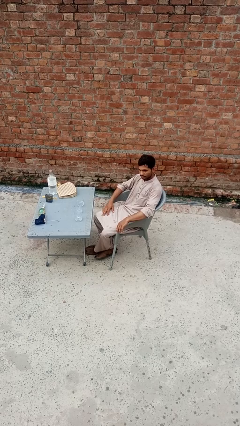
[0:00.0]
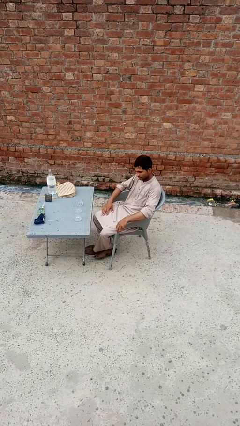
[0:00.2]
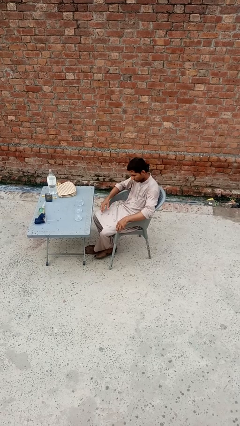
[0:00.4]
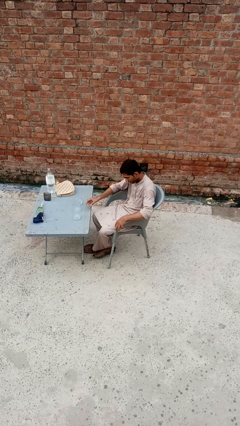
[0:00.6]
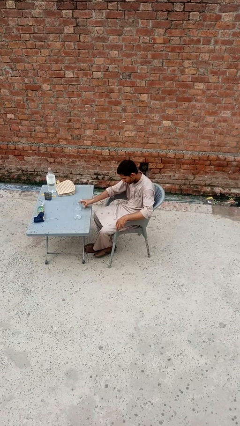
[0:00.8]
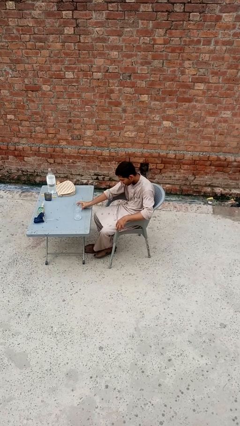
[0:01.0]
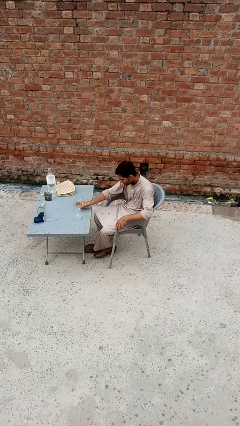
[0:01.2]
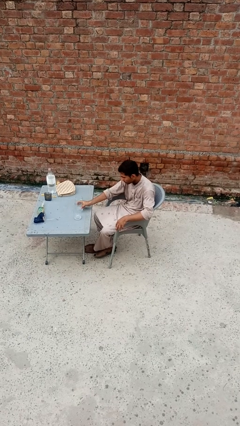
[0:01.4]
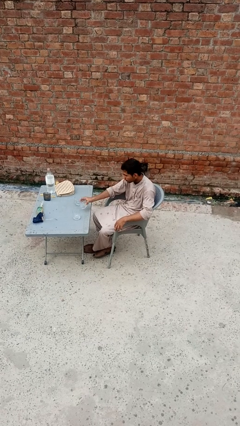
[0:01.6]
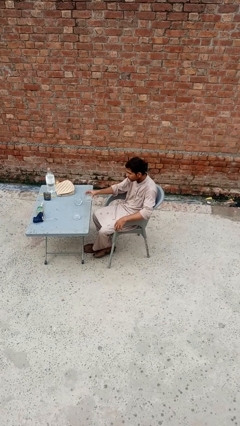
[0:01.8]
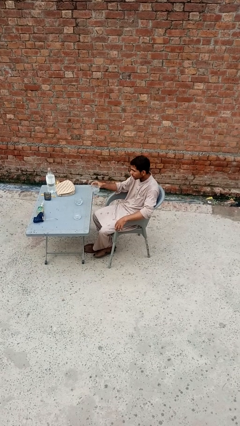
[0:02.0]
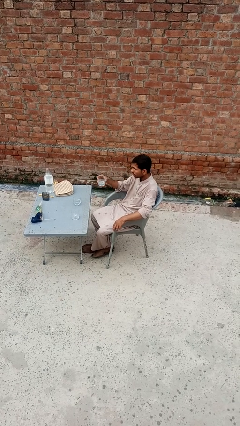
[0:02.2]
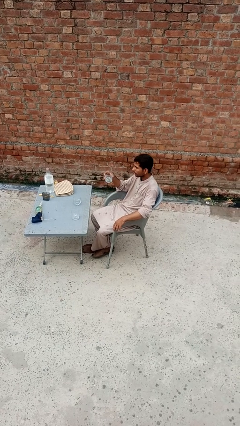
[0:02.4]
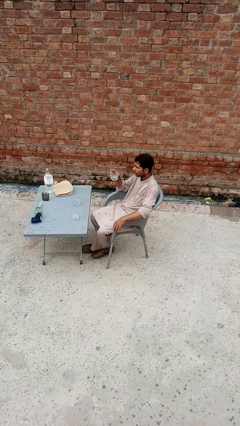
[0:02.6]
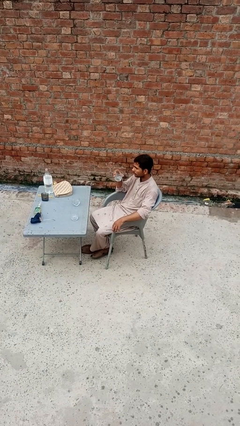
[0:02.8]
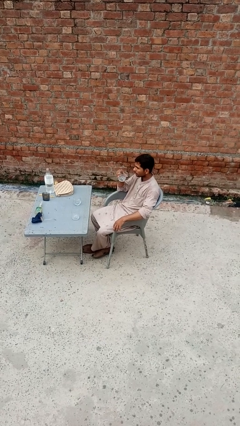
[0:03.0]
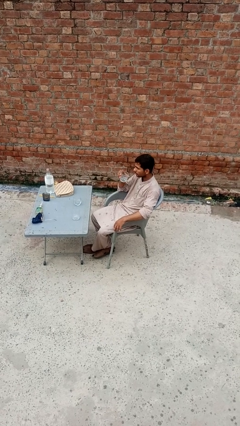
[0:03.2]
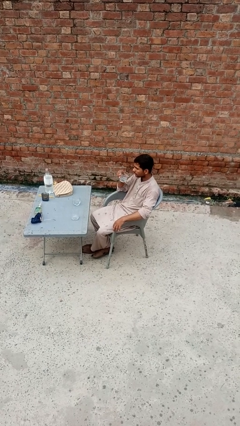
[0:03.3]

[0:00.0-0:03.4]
person picks up object from table

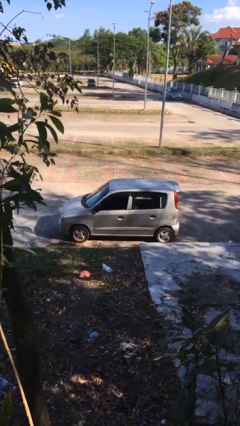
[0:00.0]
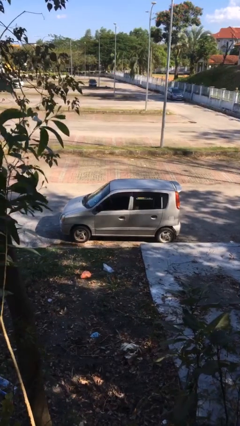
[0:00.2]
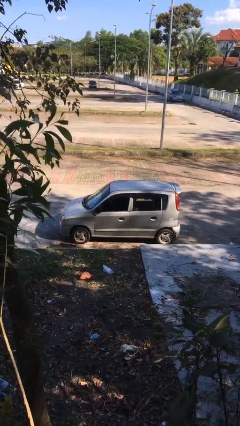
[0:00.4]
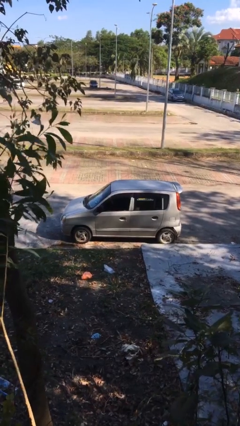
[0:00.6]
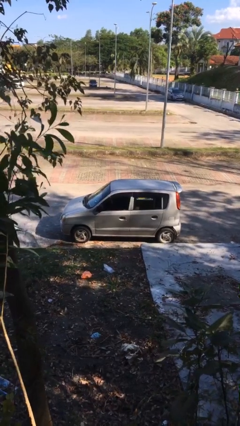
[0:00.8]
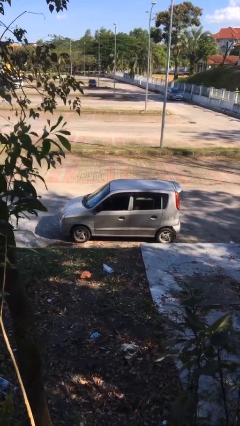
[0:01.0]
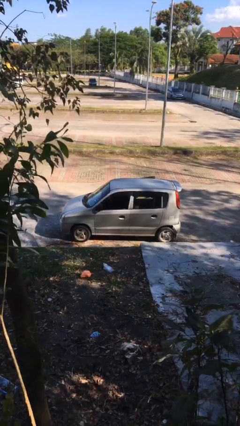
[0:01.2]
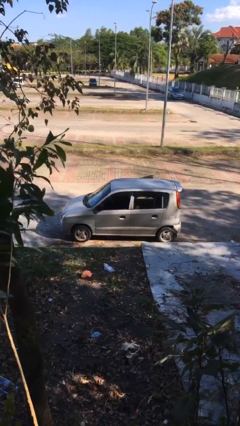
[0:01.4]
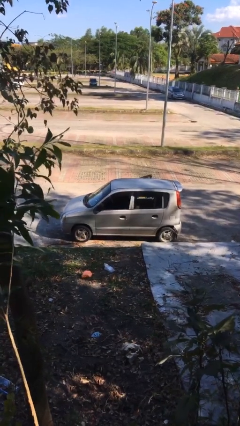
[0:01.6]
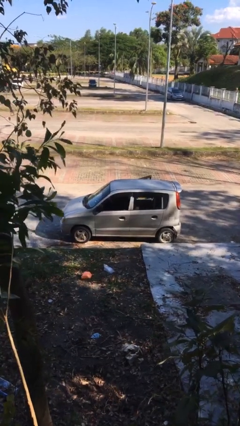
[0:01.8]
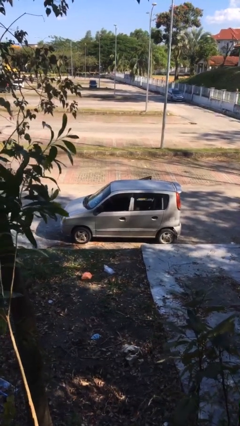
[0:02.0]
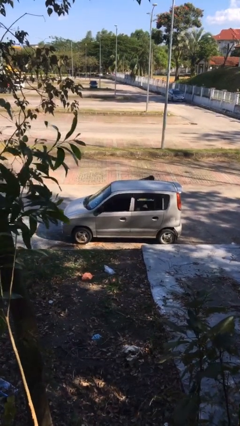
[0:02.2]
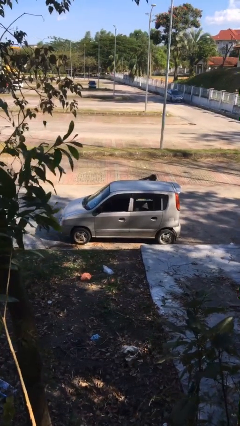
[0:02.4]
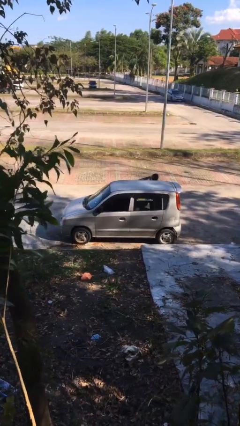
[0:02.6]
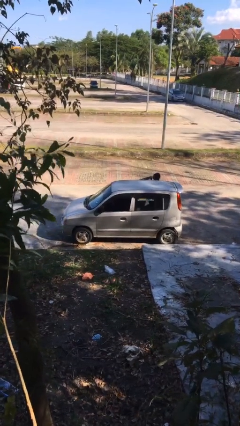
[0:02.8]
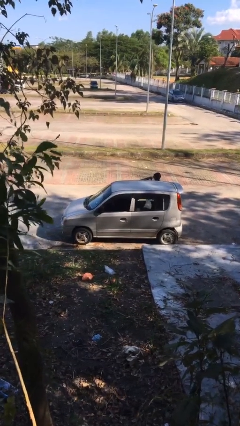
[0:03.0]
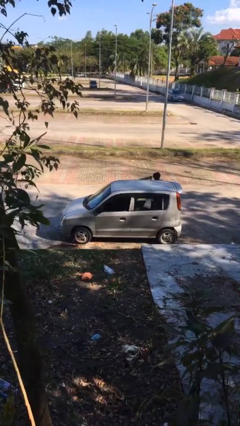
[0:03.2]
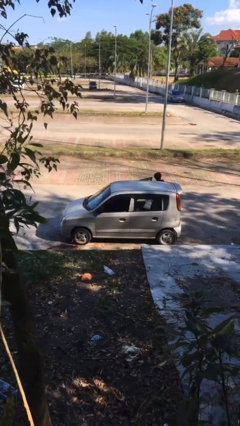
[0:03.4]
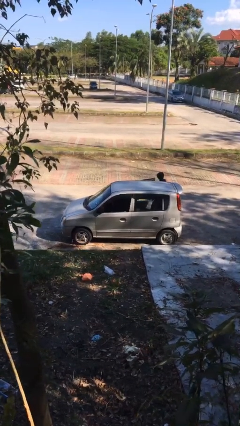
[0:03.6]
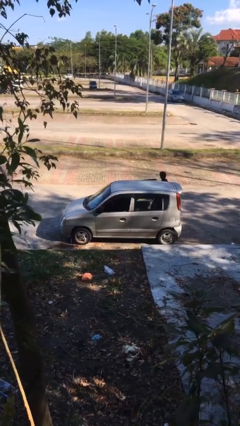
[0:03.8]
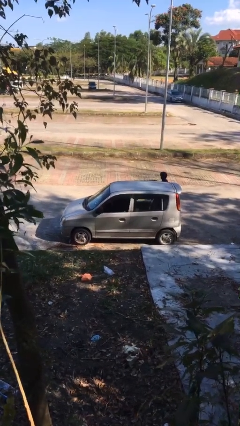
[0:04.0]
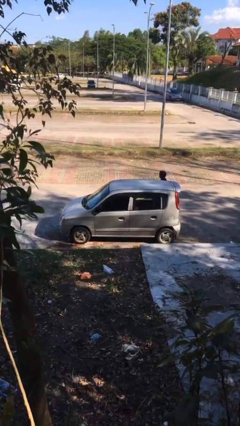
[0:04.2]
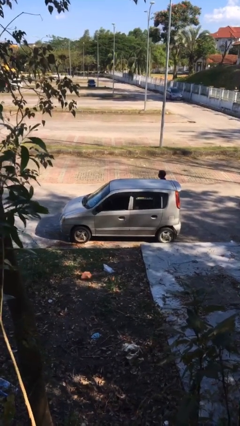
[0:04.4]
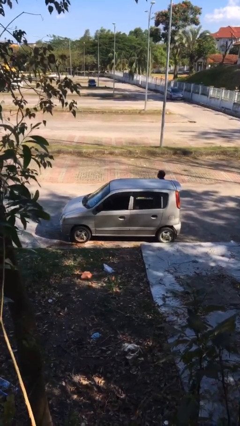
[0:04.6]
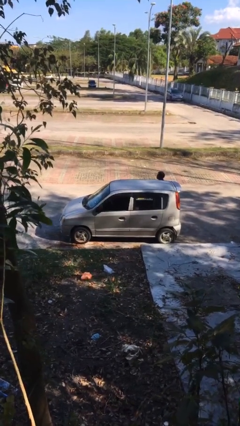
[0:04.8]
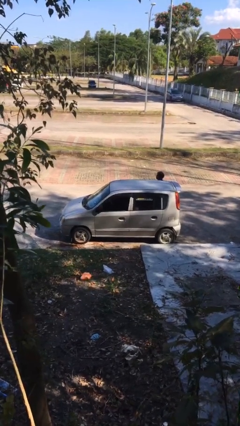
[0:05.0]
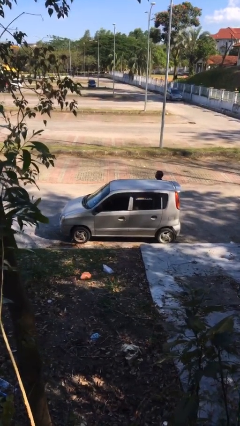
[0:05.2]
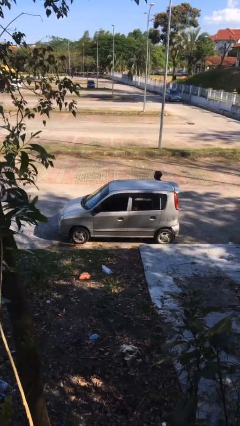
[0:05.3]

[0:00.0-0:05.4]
car drops off person

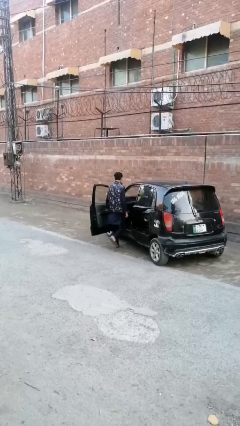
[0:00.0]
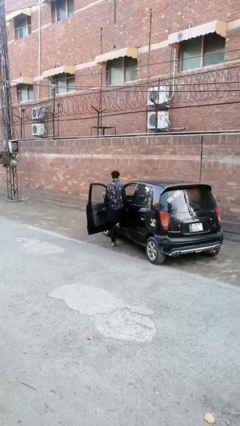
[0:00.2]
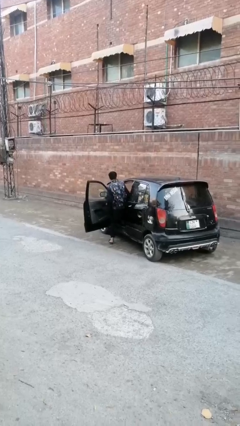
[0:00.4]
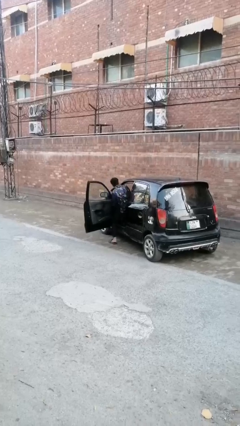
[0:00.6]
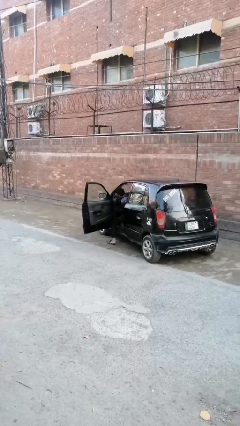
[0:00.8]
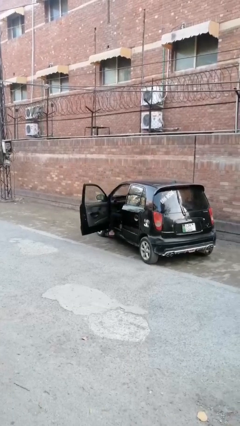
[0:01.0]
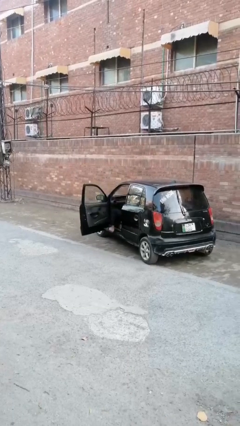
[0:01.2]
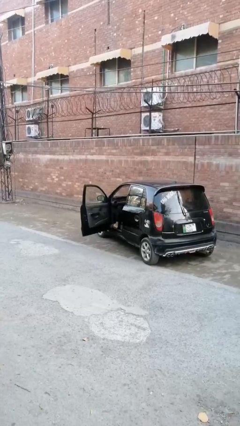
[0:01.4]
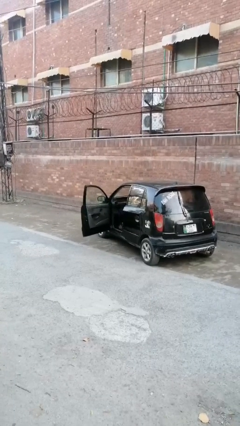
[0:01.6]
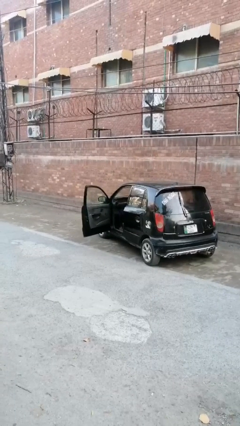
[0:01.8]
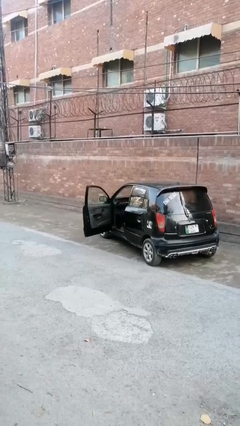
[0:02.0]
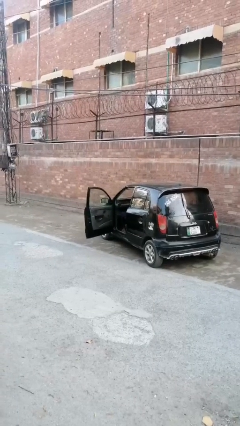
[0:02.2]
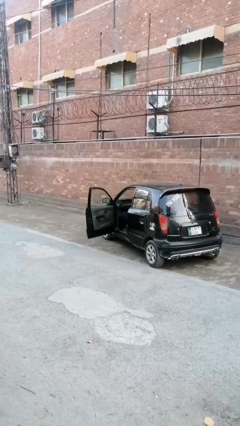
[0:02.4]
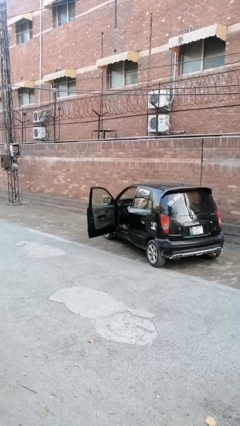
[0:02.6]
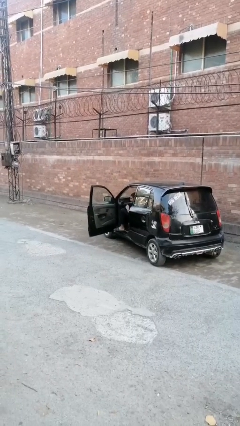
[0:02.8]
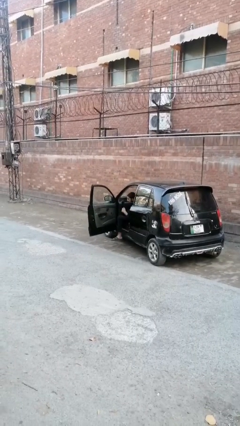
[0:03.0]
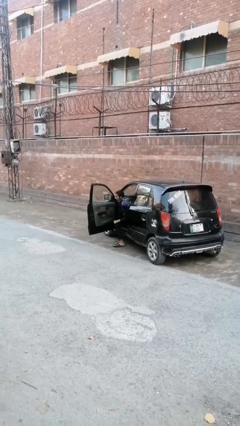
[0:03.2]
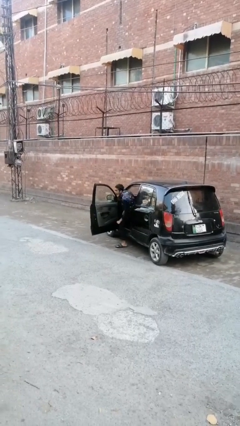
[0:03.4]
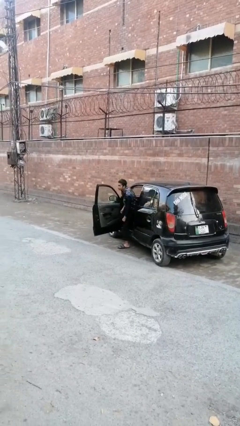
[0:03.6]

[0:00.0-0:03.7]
person enters car

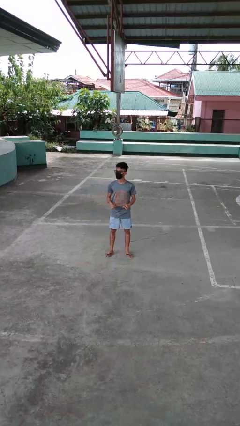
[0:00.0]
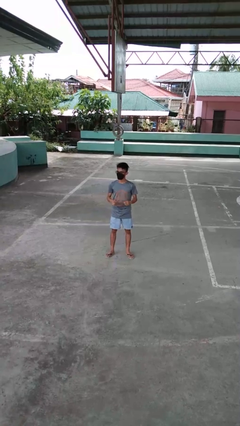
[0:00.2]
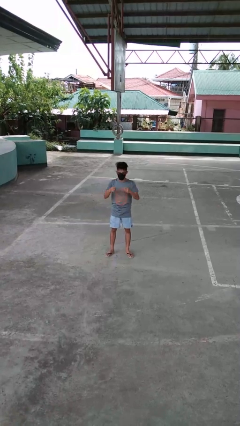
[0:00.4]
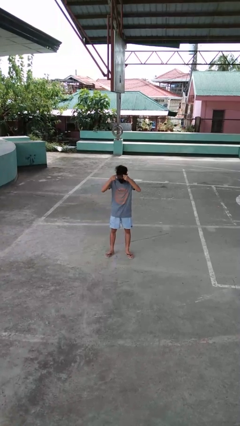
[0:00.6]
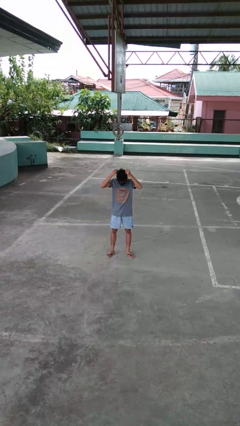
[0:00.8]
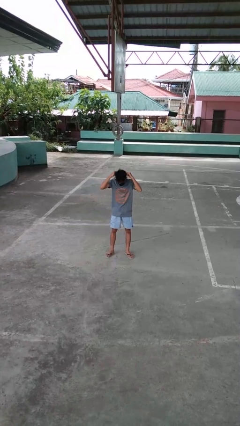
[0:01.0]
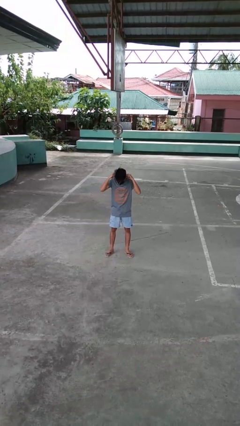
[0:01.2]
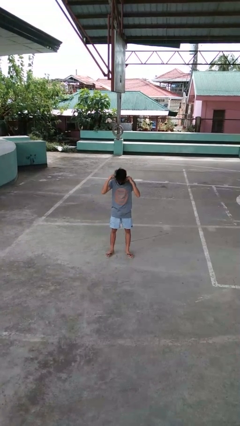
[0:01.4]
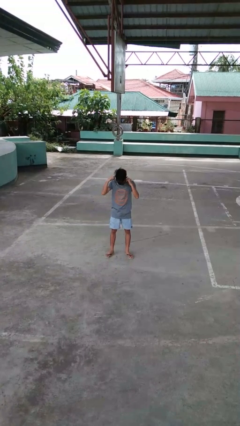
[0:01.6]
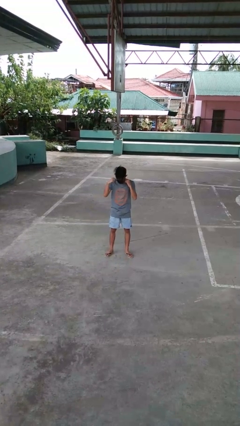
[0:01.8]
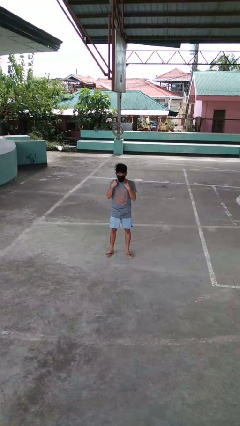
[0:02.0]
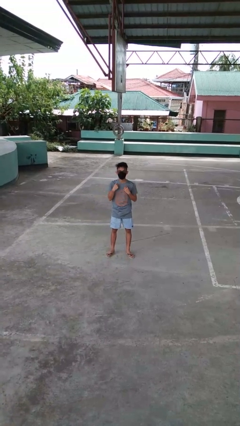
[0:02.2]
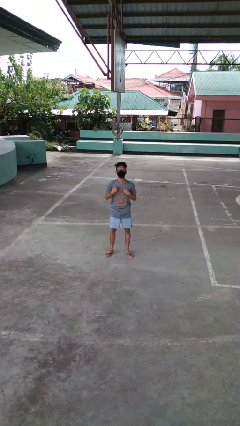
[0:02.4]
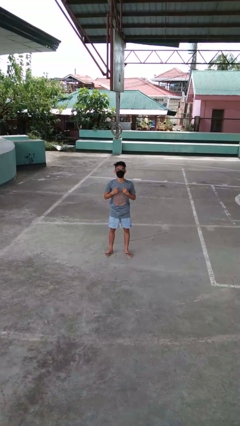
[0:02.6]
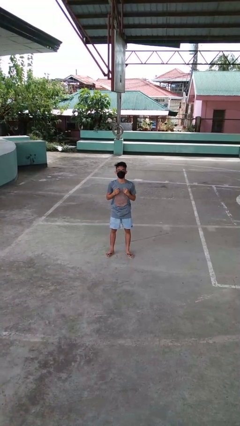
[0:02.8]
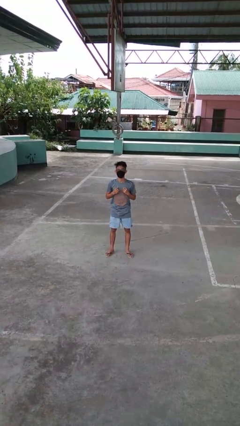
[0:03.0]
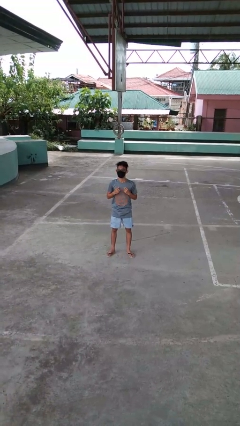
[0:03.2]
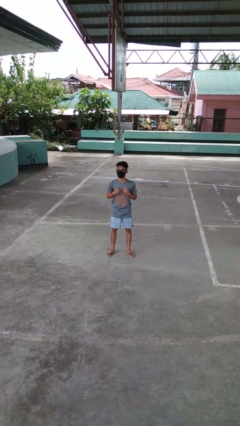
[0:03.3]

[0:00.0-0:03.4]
person puts on necklace

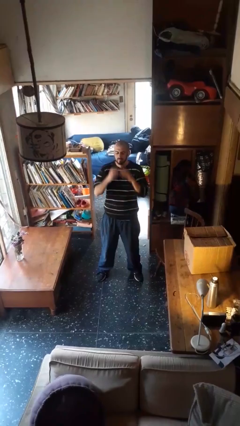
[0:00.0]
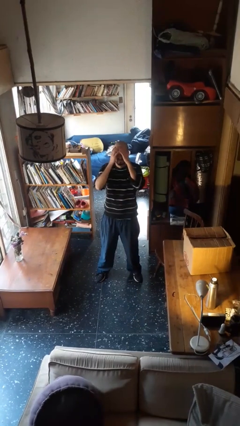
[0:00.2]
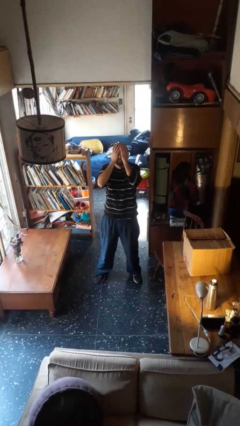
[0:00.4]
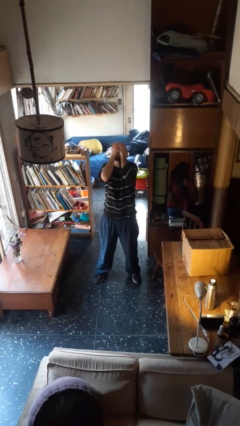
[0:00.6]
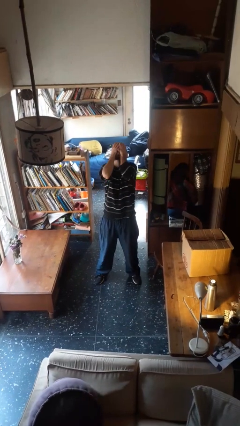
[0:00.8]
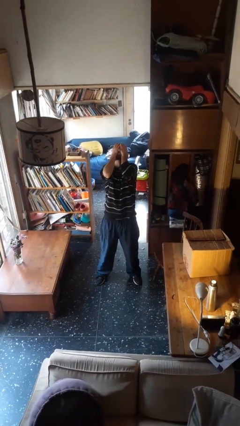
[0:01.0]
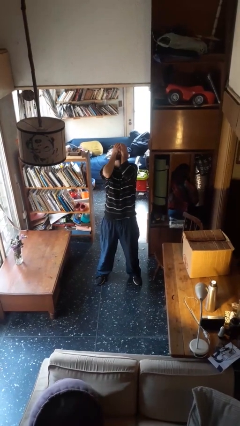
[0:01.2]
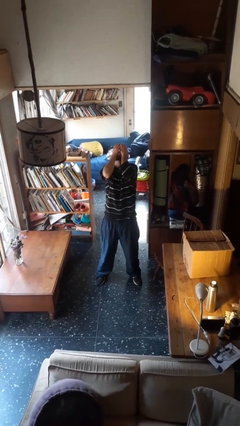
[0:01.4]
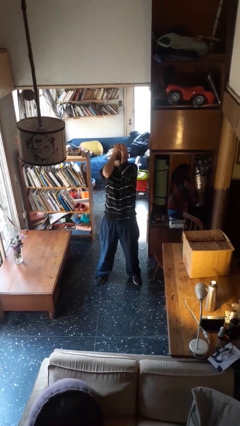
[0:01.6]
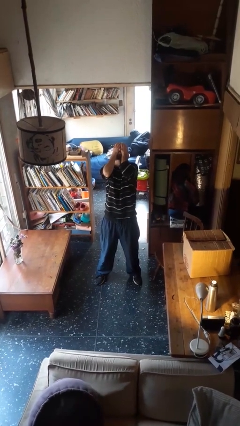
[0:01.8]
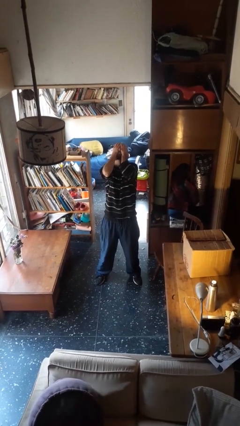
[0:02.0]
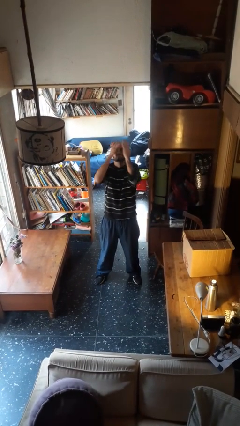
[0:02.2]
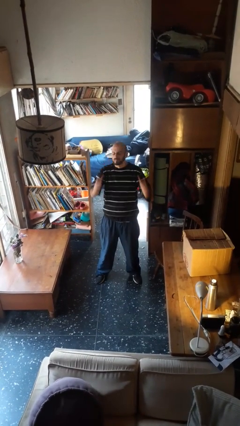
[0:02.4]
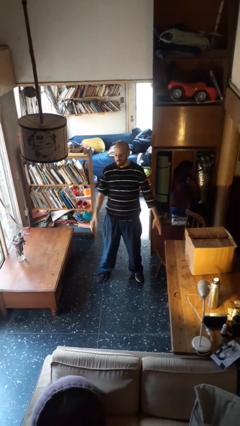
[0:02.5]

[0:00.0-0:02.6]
person covers face with hands
